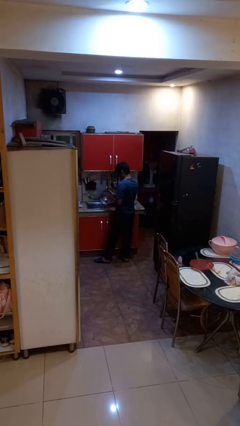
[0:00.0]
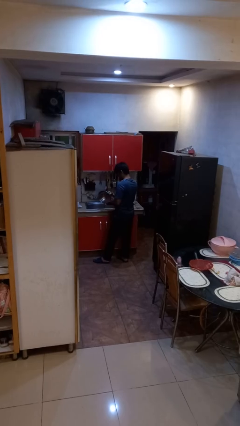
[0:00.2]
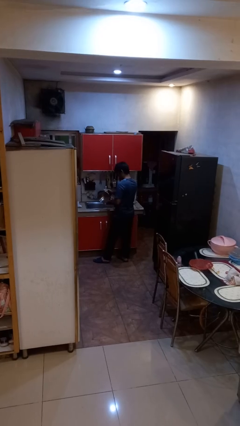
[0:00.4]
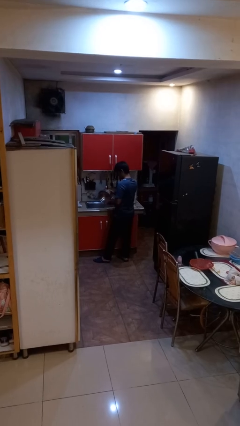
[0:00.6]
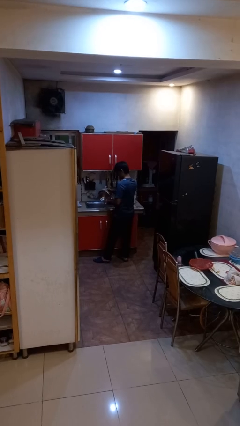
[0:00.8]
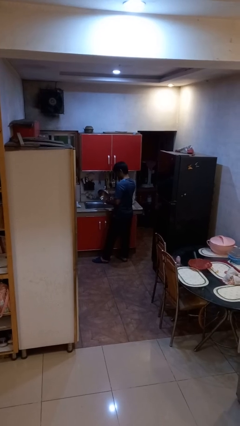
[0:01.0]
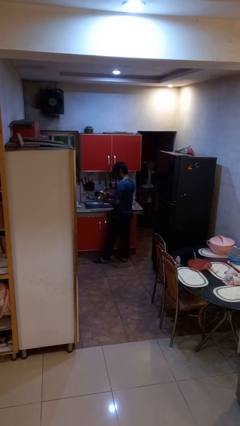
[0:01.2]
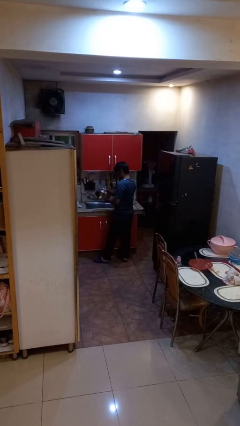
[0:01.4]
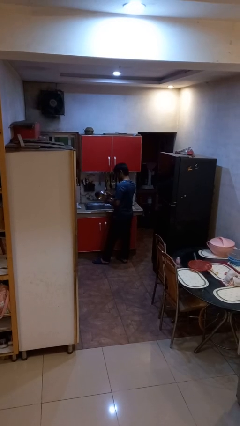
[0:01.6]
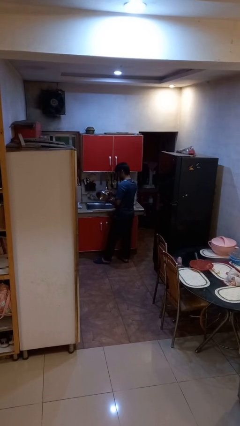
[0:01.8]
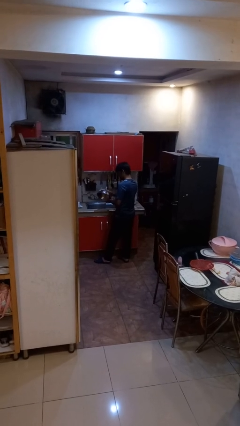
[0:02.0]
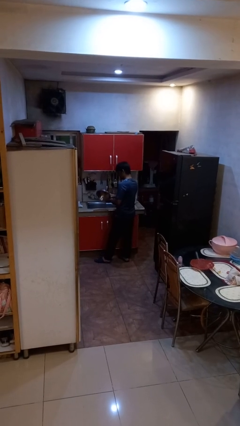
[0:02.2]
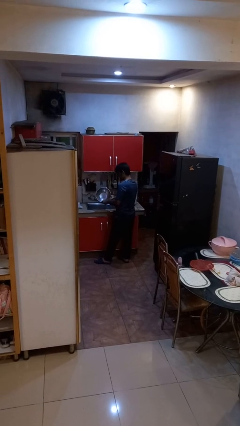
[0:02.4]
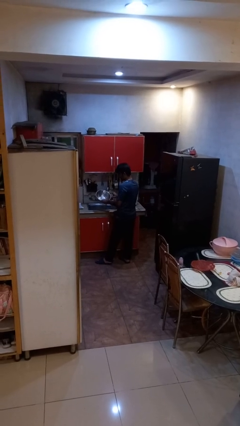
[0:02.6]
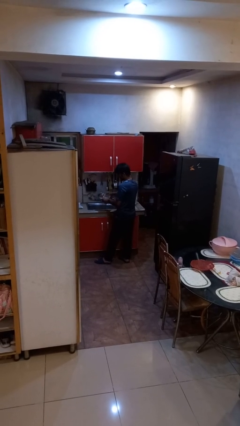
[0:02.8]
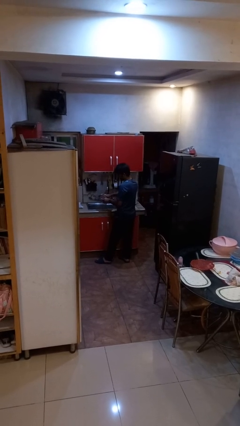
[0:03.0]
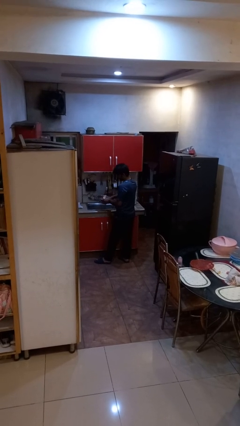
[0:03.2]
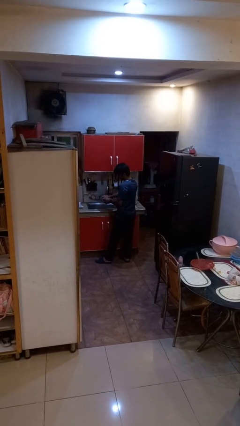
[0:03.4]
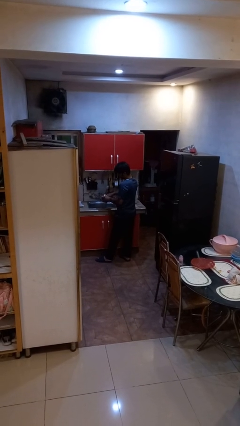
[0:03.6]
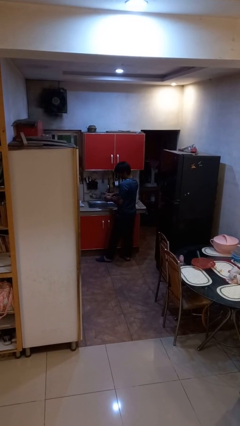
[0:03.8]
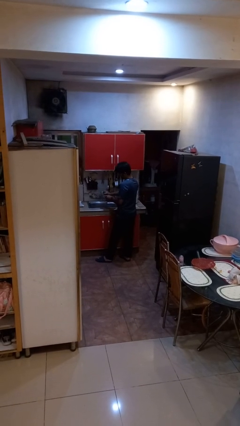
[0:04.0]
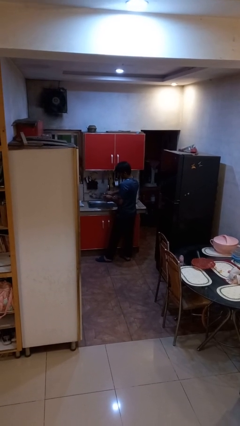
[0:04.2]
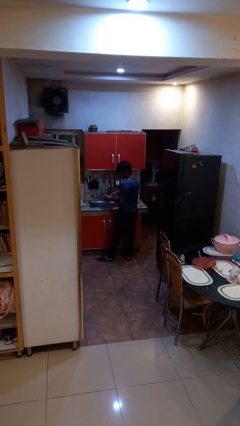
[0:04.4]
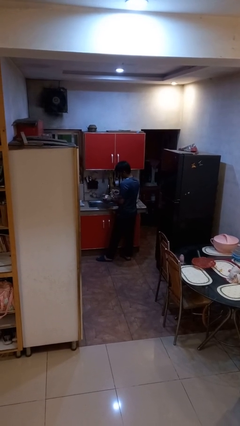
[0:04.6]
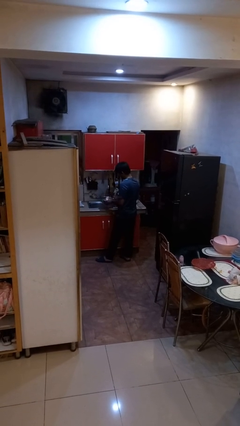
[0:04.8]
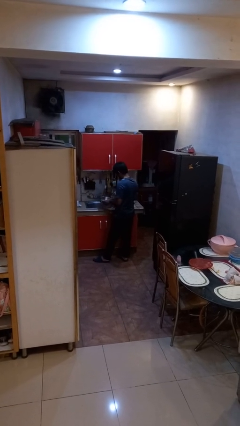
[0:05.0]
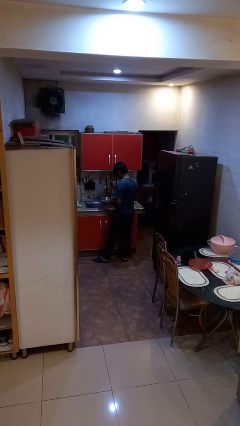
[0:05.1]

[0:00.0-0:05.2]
person washes dish

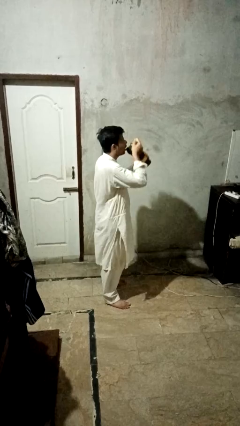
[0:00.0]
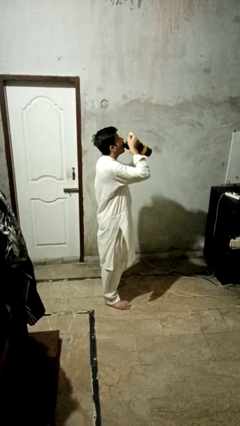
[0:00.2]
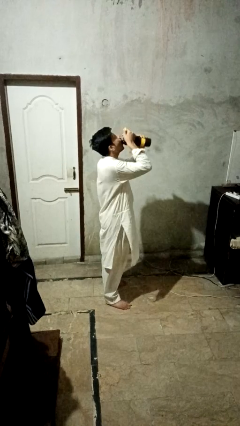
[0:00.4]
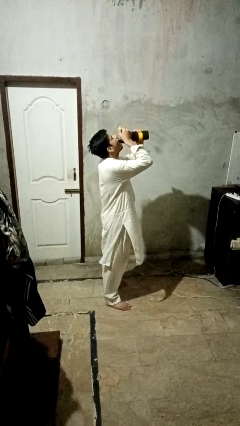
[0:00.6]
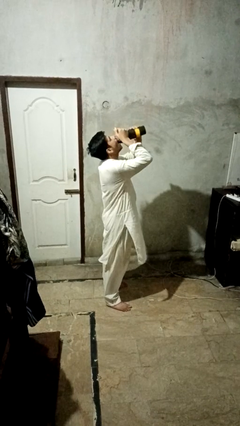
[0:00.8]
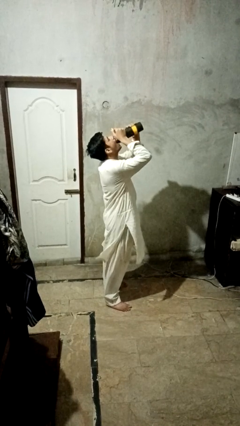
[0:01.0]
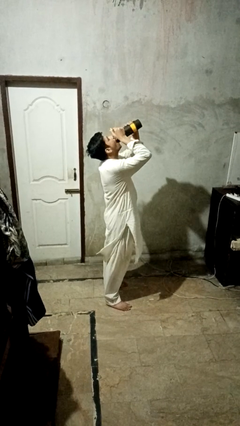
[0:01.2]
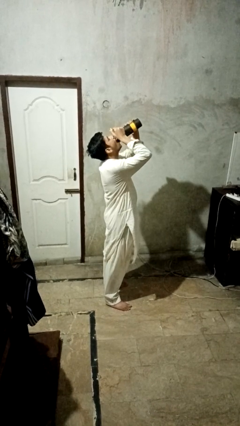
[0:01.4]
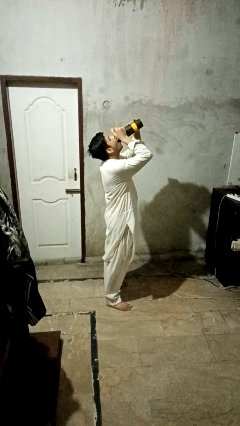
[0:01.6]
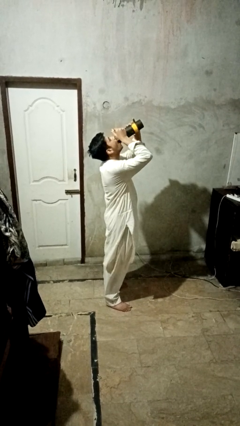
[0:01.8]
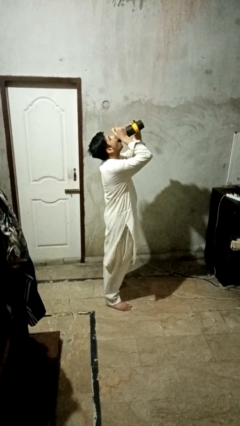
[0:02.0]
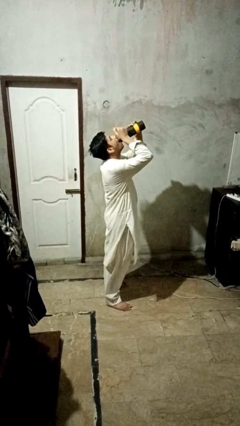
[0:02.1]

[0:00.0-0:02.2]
person drinks from bottle

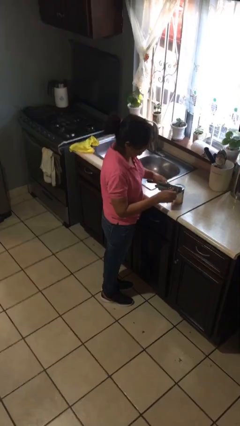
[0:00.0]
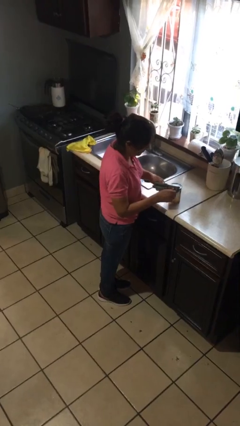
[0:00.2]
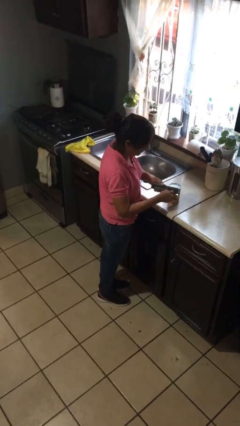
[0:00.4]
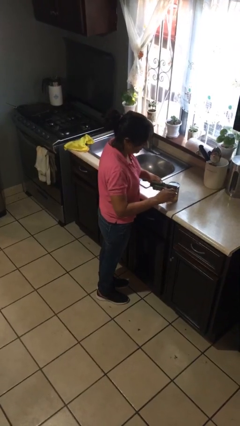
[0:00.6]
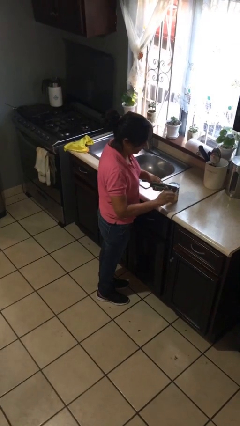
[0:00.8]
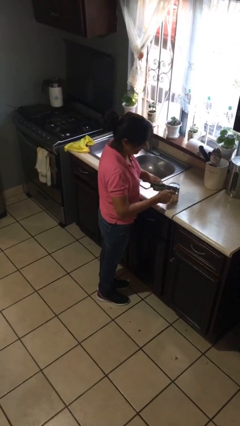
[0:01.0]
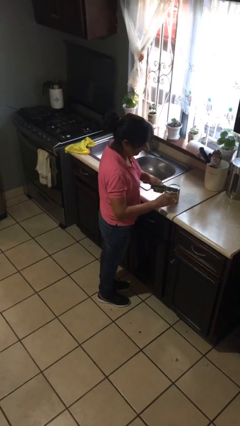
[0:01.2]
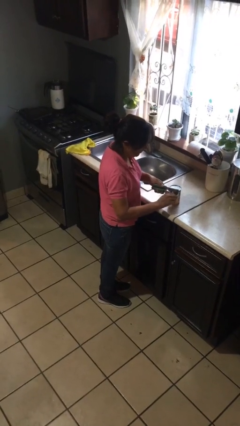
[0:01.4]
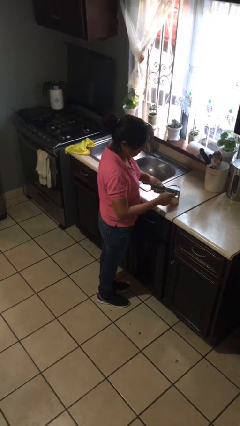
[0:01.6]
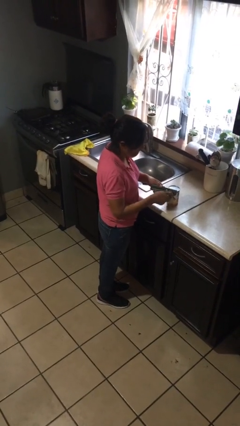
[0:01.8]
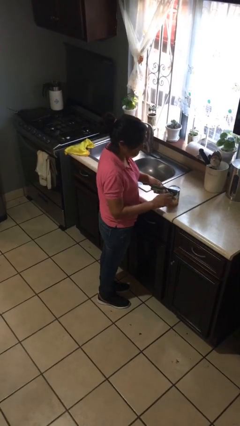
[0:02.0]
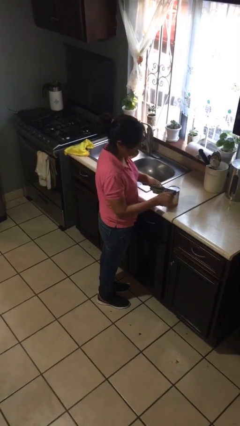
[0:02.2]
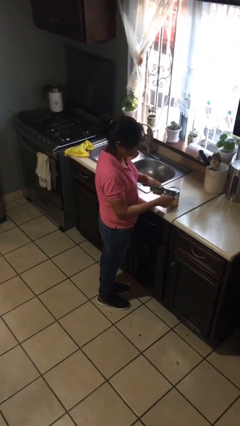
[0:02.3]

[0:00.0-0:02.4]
person opens can with can opener

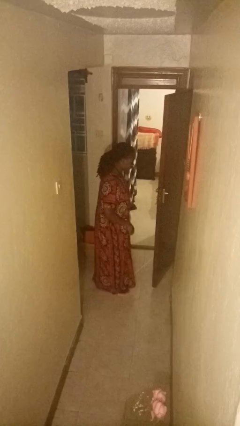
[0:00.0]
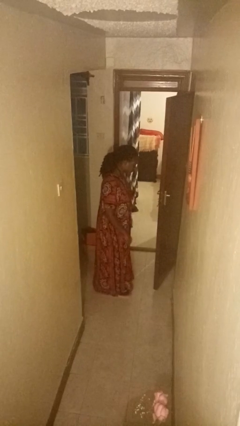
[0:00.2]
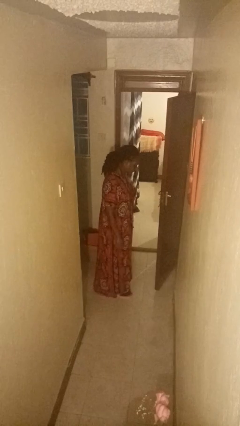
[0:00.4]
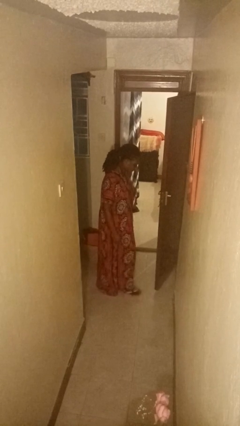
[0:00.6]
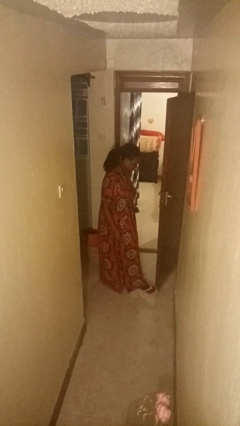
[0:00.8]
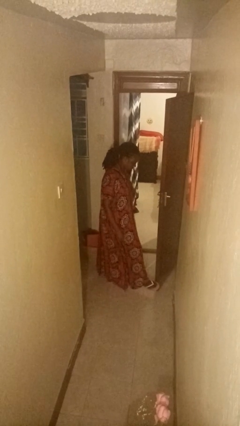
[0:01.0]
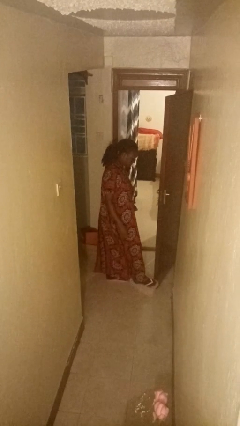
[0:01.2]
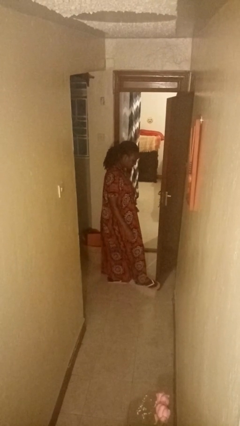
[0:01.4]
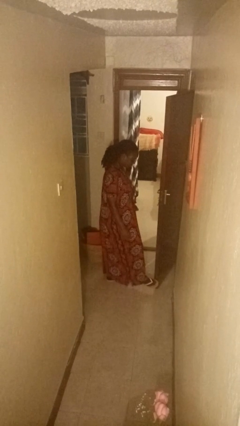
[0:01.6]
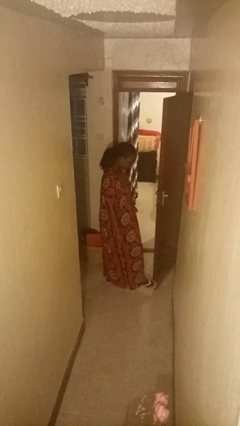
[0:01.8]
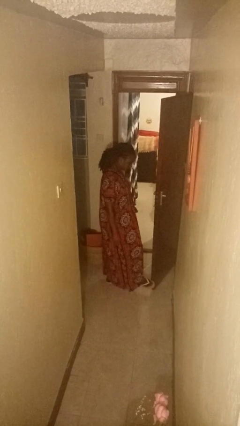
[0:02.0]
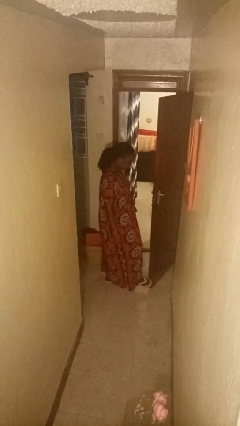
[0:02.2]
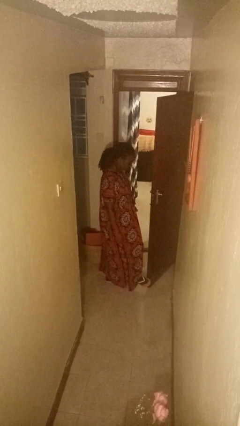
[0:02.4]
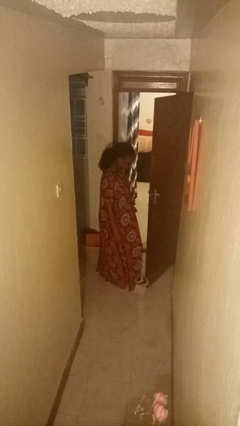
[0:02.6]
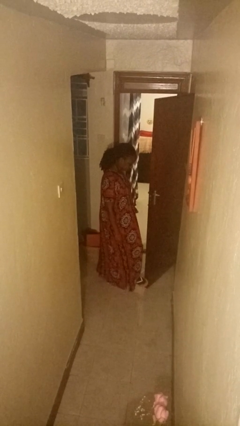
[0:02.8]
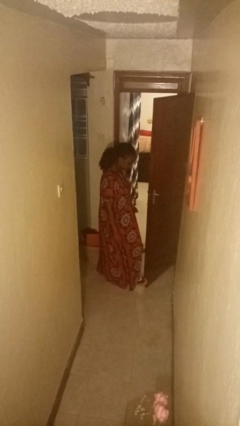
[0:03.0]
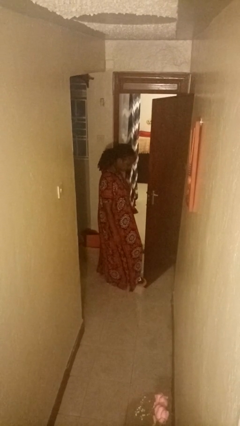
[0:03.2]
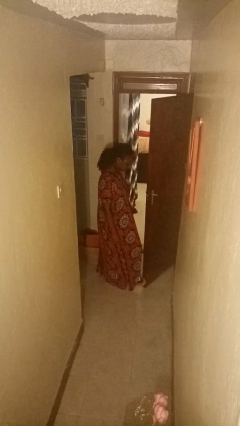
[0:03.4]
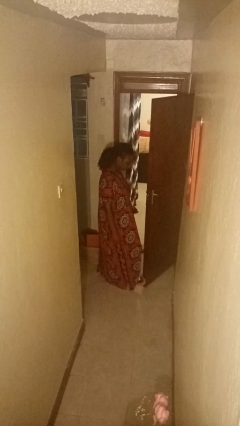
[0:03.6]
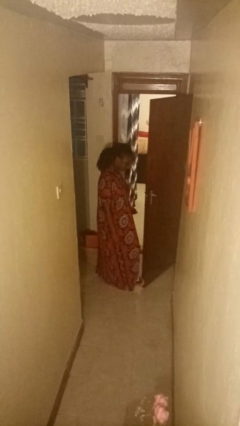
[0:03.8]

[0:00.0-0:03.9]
person opens facility door

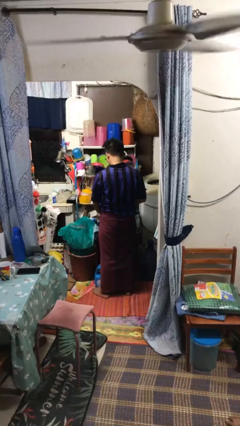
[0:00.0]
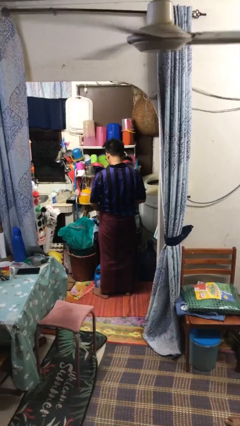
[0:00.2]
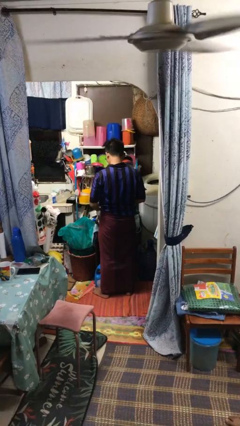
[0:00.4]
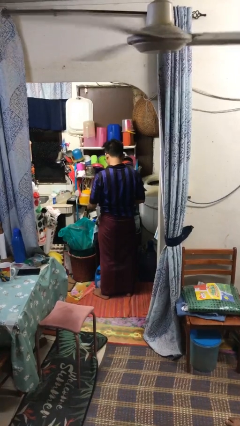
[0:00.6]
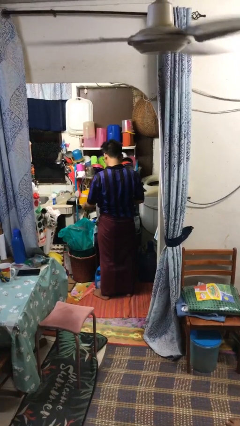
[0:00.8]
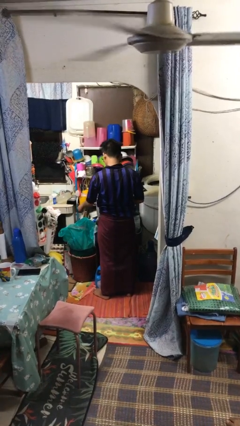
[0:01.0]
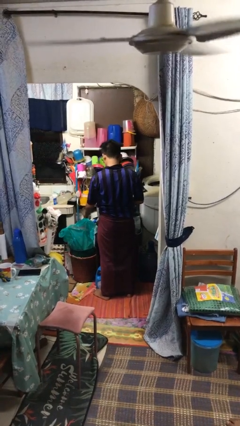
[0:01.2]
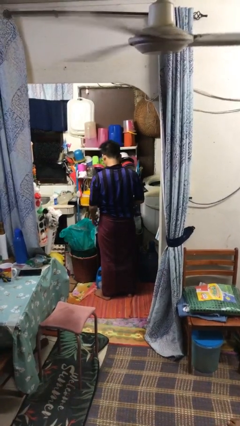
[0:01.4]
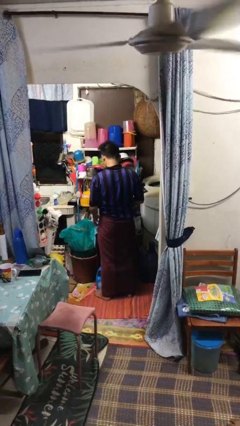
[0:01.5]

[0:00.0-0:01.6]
person discards trash

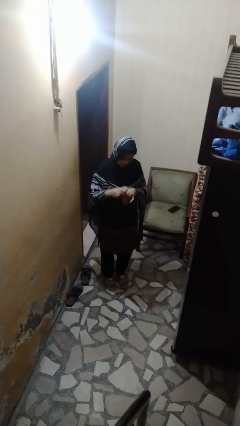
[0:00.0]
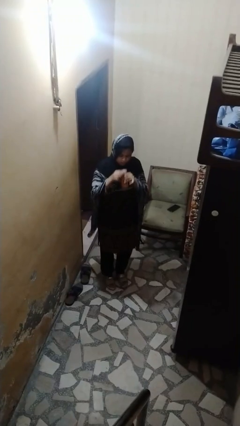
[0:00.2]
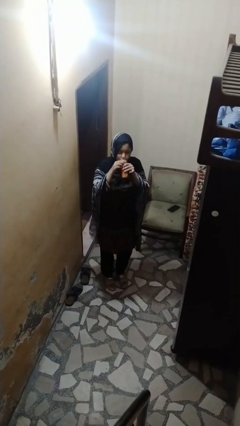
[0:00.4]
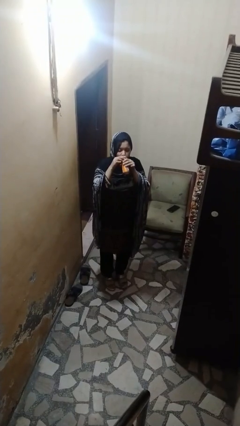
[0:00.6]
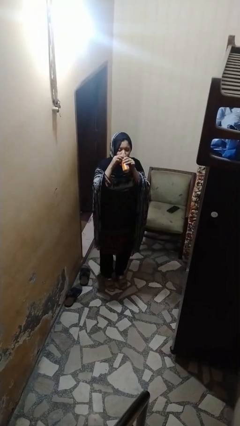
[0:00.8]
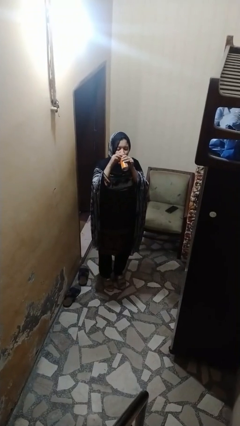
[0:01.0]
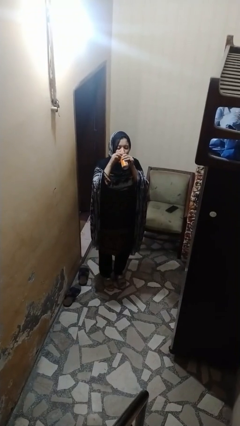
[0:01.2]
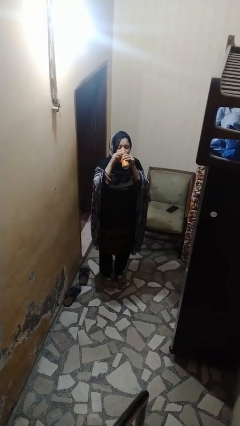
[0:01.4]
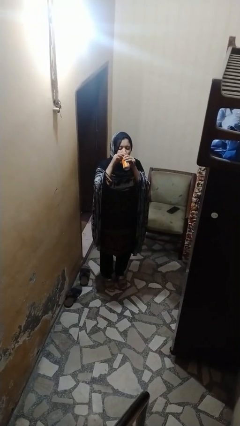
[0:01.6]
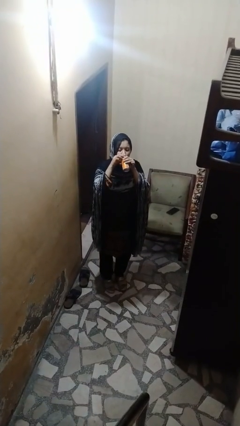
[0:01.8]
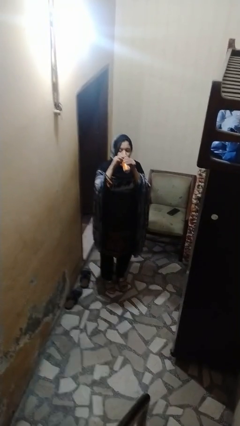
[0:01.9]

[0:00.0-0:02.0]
person drinks from beverage can
